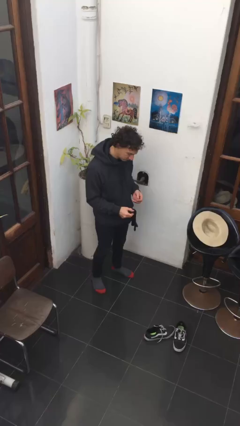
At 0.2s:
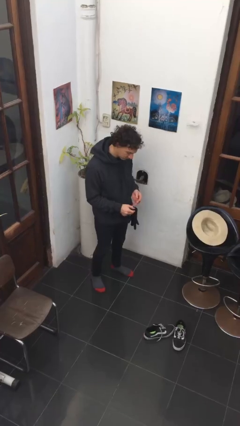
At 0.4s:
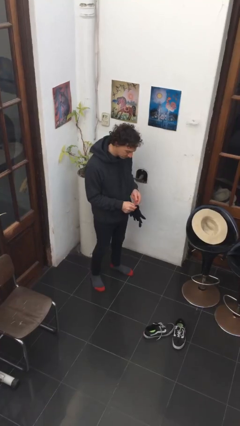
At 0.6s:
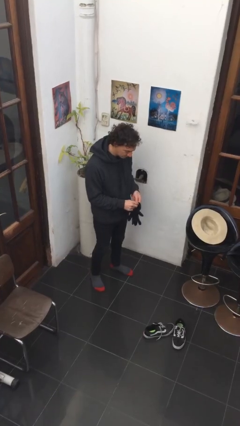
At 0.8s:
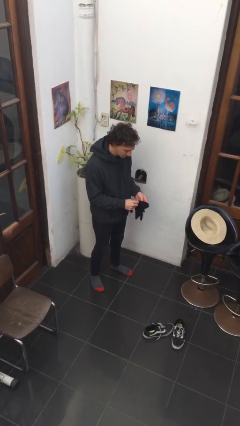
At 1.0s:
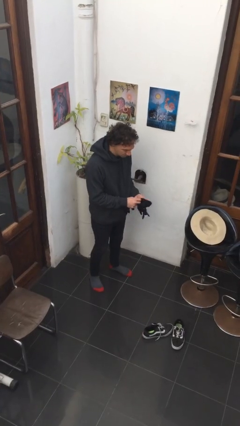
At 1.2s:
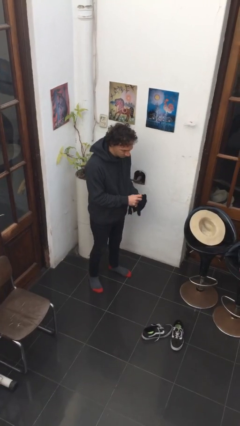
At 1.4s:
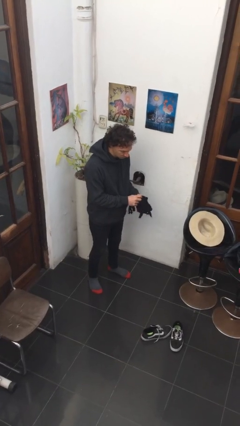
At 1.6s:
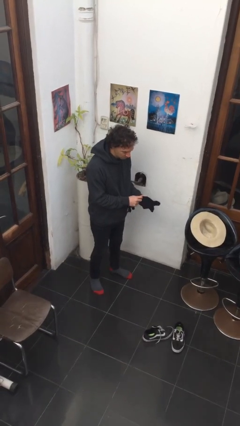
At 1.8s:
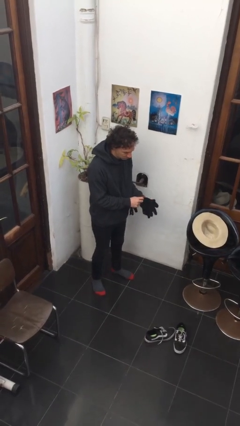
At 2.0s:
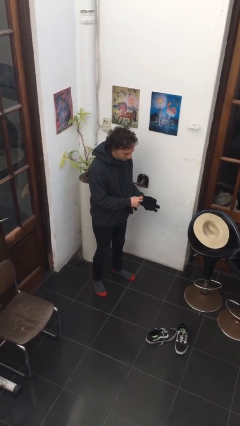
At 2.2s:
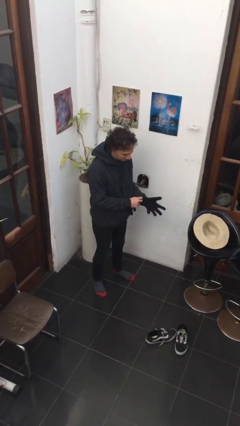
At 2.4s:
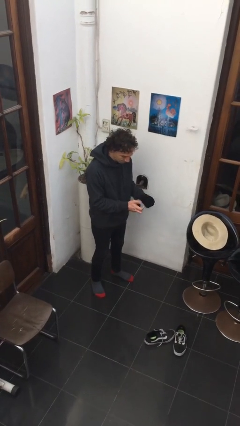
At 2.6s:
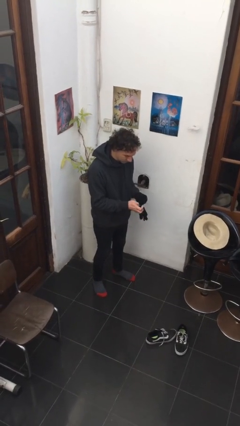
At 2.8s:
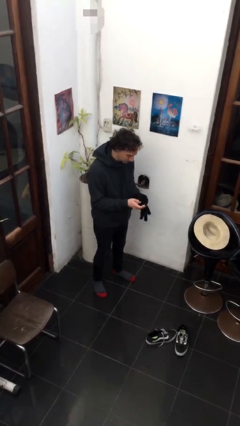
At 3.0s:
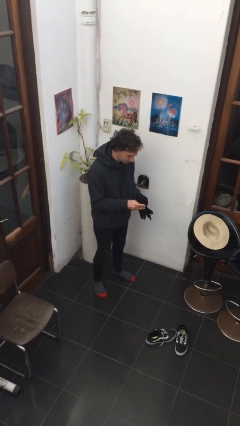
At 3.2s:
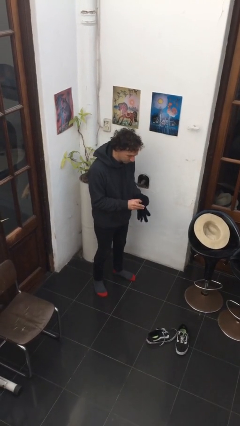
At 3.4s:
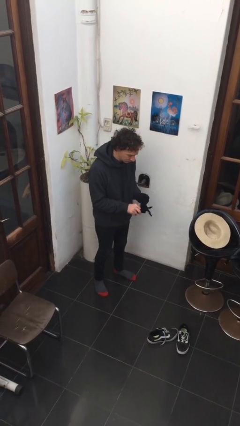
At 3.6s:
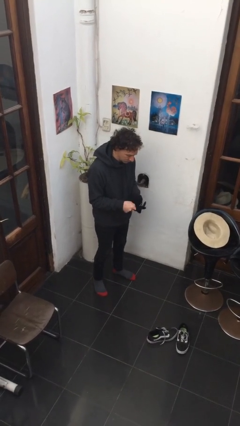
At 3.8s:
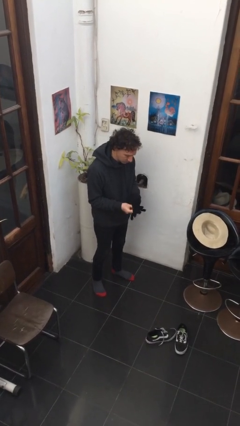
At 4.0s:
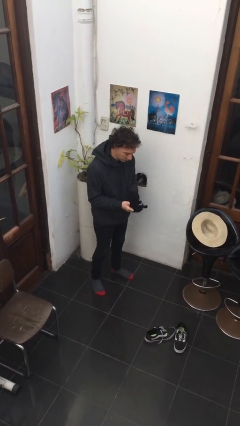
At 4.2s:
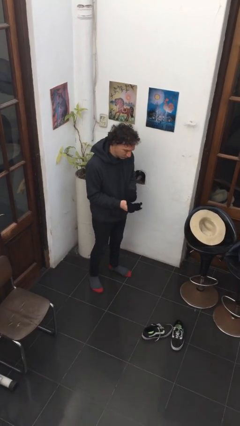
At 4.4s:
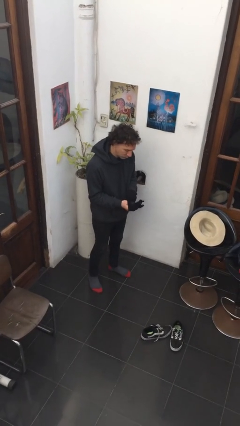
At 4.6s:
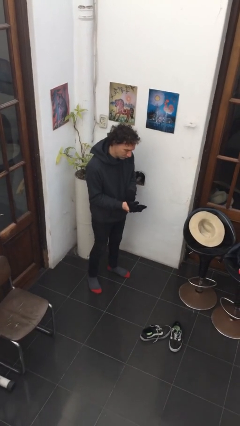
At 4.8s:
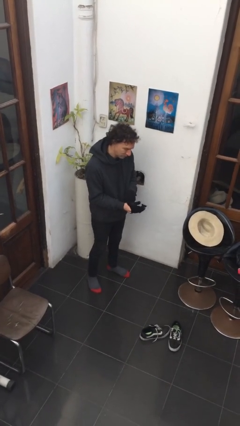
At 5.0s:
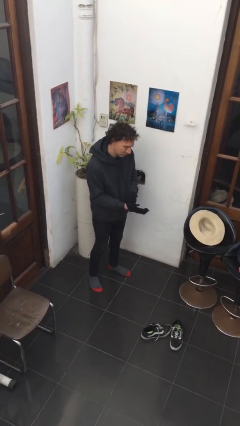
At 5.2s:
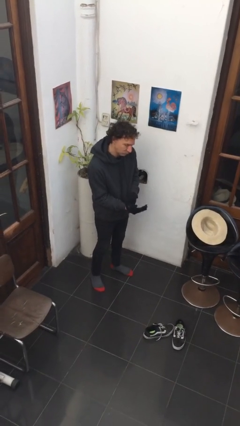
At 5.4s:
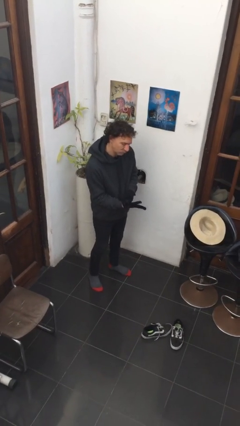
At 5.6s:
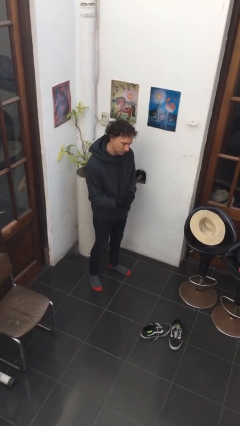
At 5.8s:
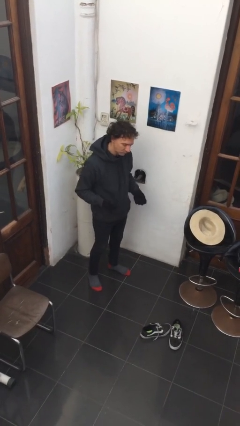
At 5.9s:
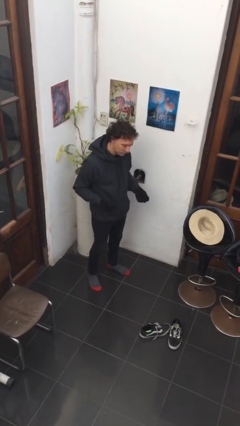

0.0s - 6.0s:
person puts on gloves

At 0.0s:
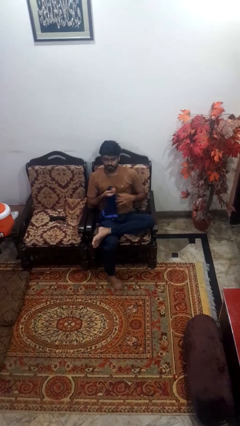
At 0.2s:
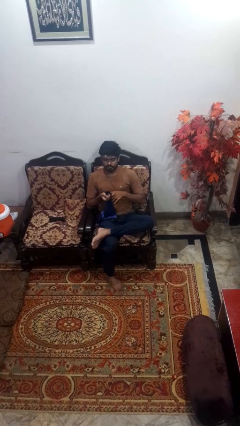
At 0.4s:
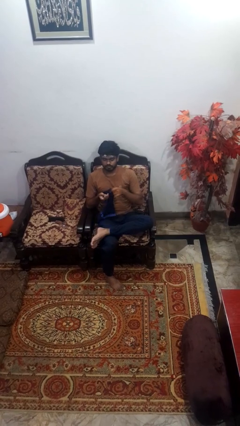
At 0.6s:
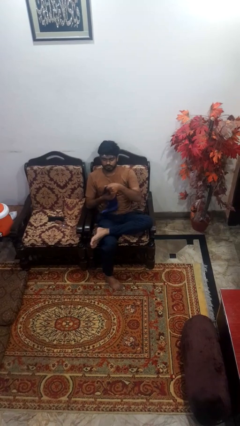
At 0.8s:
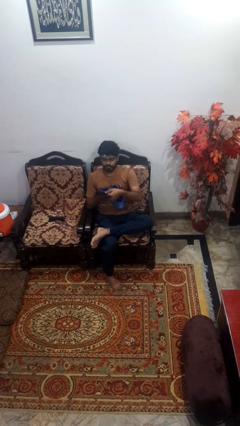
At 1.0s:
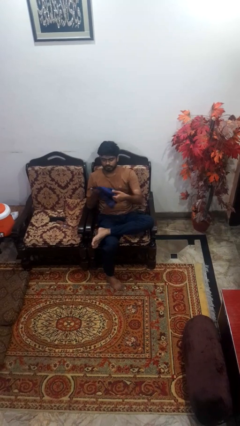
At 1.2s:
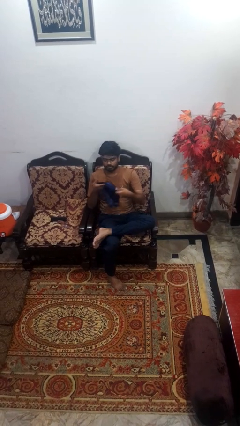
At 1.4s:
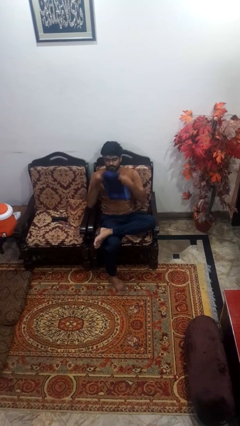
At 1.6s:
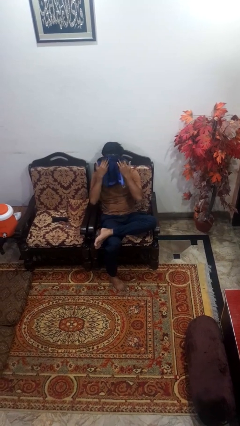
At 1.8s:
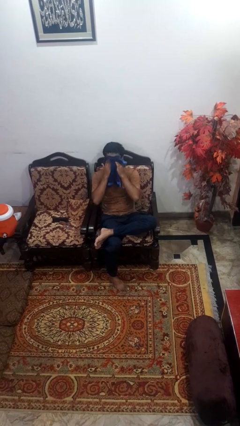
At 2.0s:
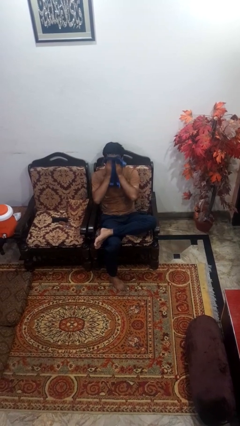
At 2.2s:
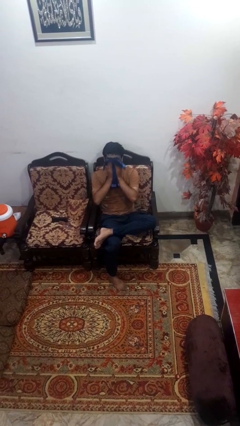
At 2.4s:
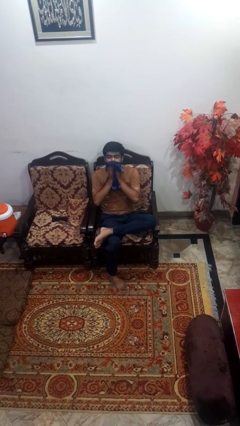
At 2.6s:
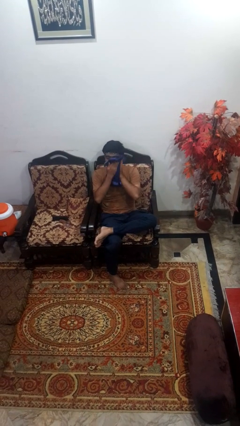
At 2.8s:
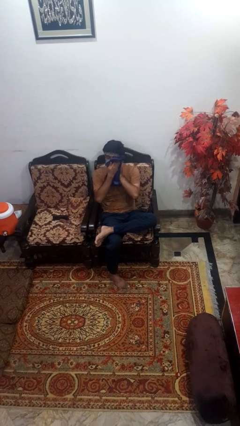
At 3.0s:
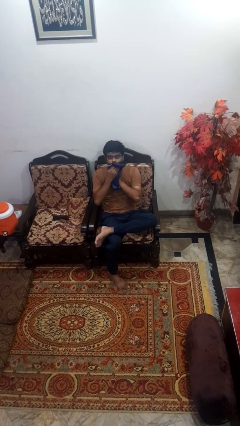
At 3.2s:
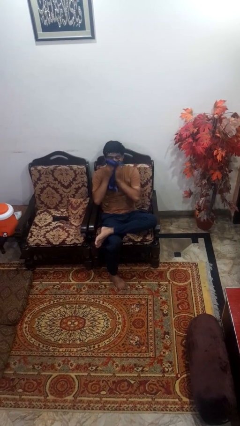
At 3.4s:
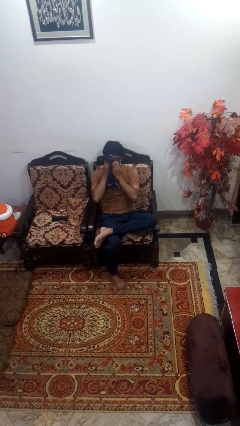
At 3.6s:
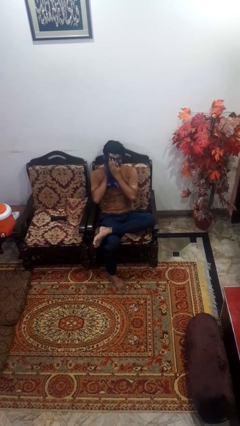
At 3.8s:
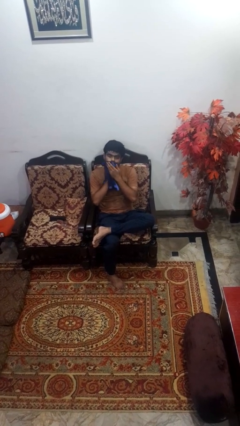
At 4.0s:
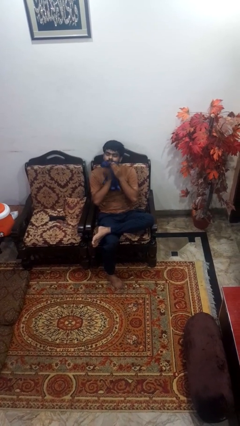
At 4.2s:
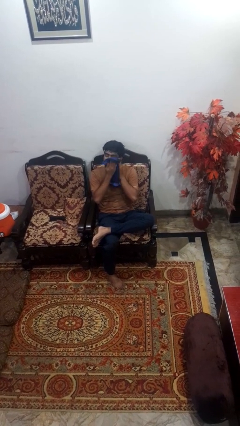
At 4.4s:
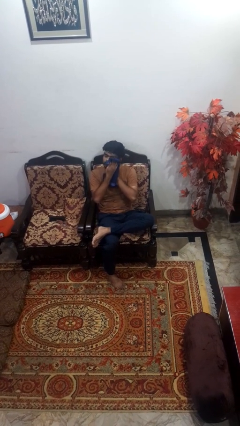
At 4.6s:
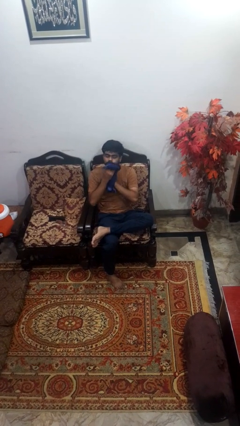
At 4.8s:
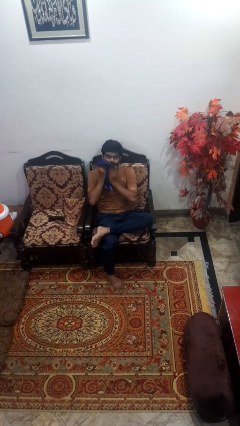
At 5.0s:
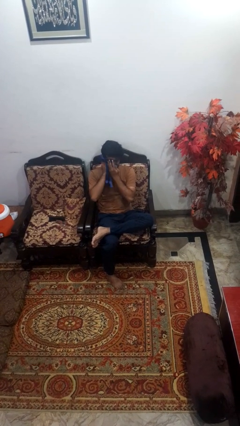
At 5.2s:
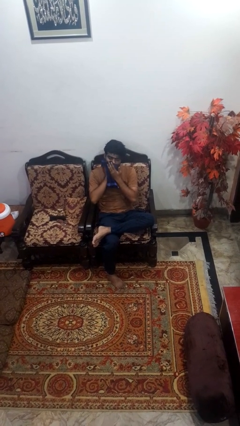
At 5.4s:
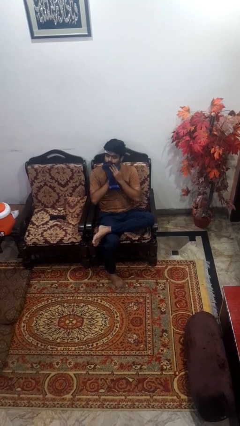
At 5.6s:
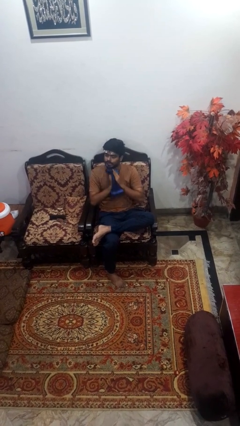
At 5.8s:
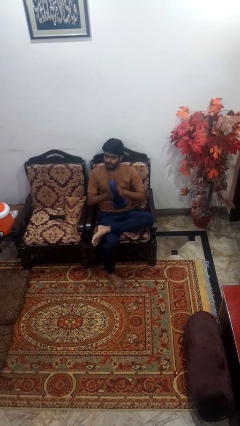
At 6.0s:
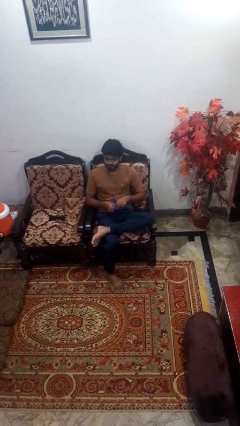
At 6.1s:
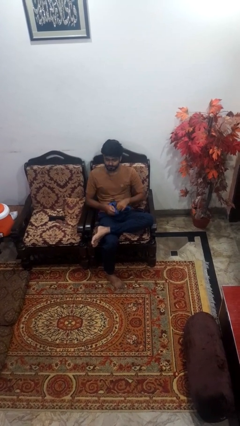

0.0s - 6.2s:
person wipes mouth with napkin

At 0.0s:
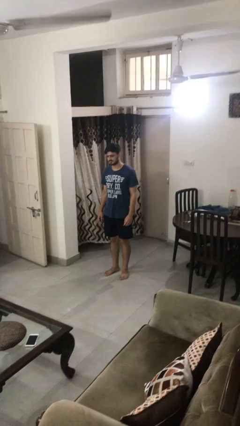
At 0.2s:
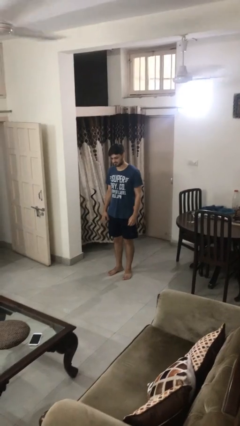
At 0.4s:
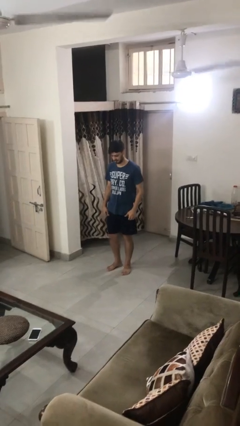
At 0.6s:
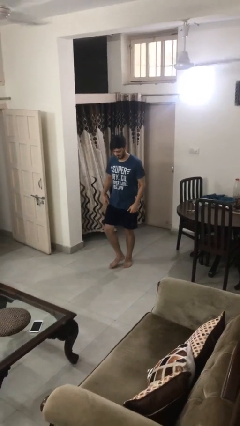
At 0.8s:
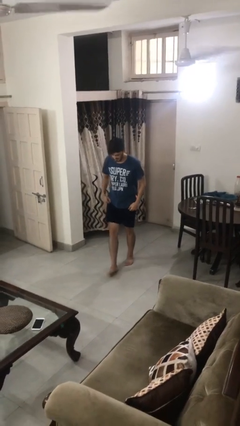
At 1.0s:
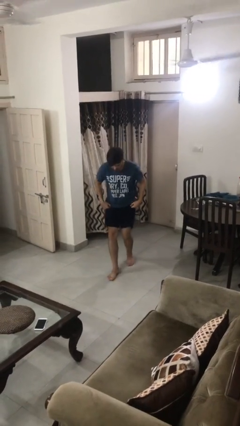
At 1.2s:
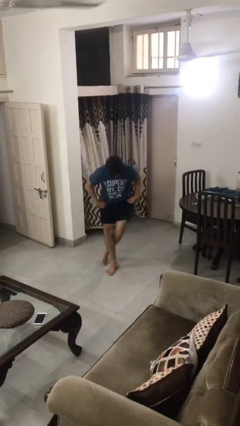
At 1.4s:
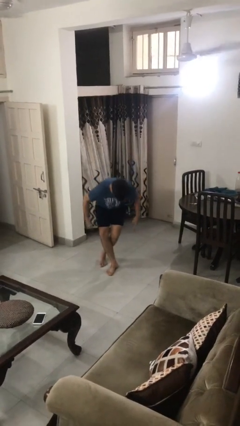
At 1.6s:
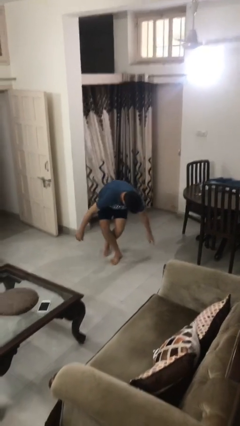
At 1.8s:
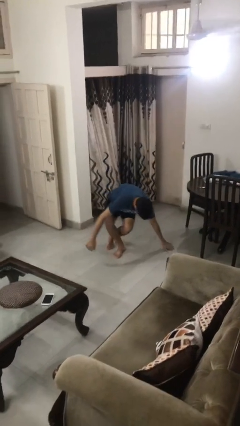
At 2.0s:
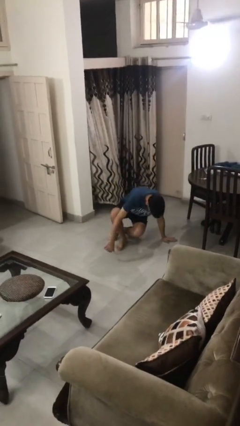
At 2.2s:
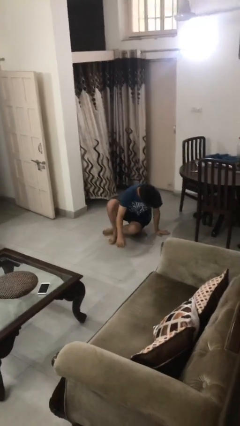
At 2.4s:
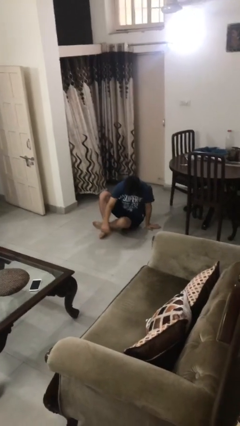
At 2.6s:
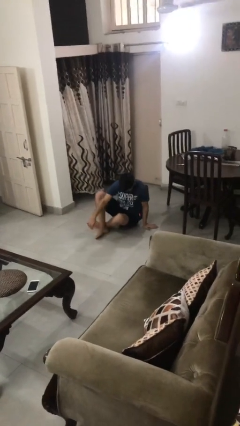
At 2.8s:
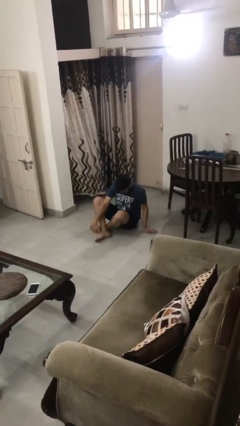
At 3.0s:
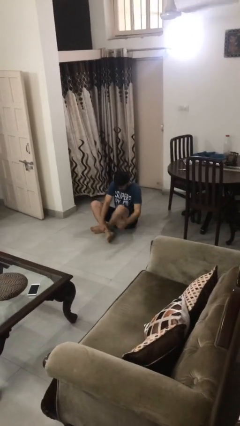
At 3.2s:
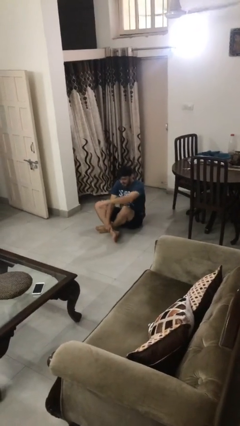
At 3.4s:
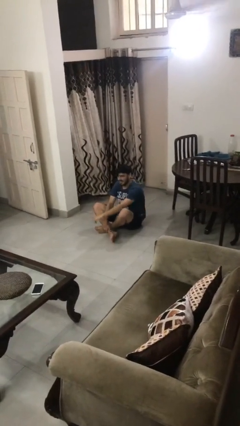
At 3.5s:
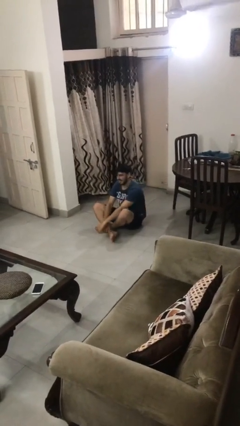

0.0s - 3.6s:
person sits crisscross

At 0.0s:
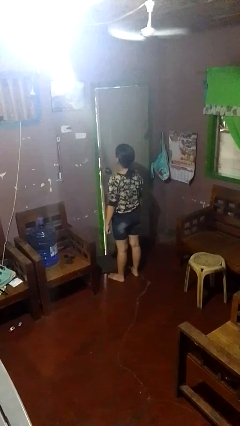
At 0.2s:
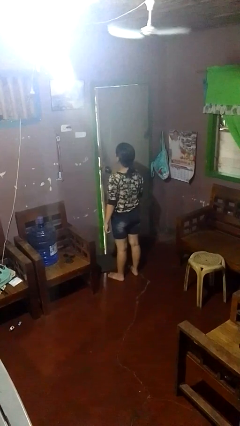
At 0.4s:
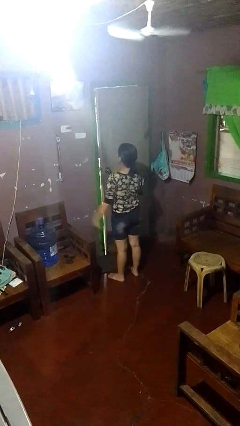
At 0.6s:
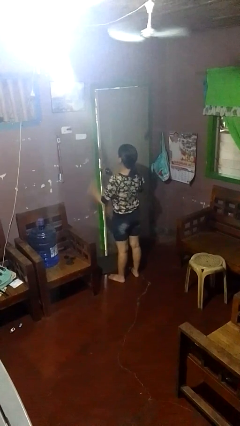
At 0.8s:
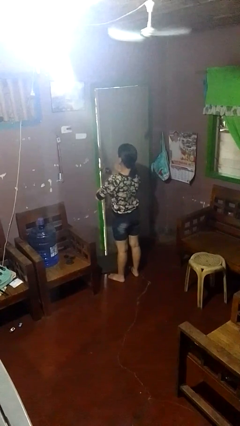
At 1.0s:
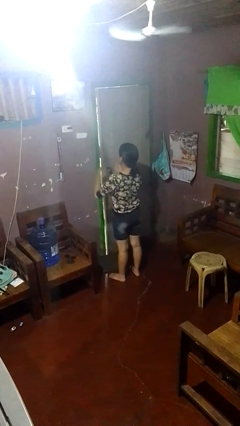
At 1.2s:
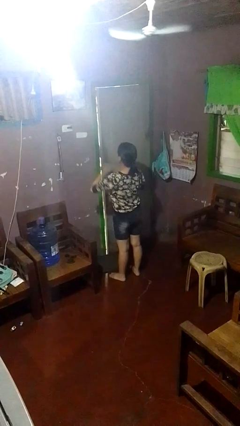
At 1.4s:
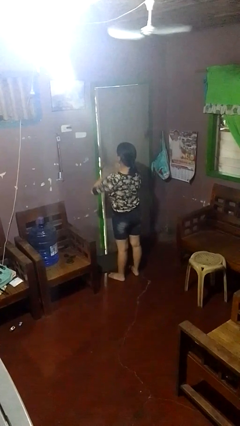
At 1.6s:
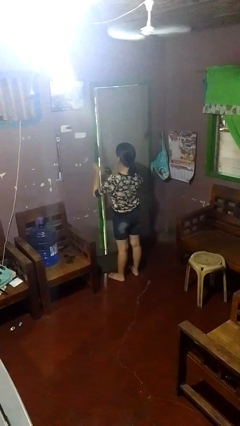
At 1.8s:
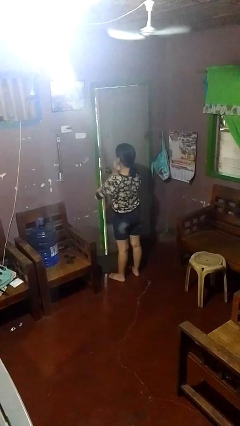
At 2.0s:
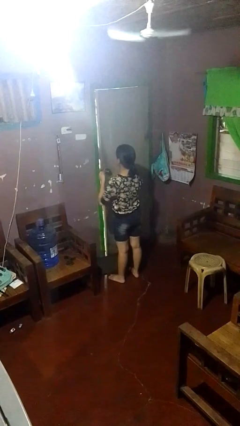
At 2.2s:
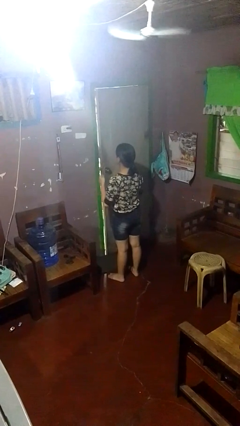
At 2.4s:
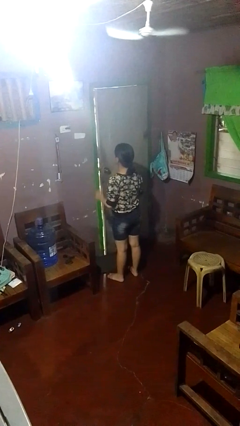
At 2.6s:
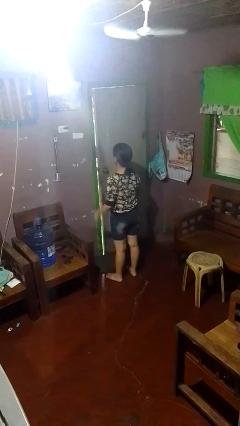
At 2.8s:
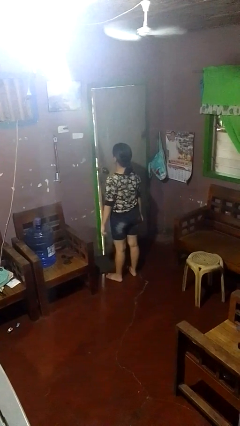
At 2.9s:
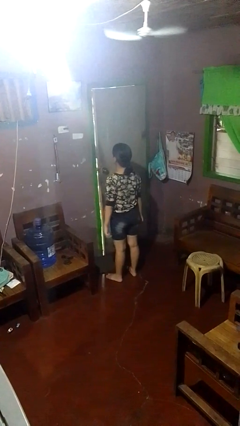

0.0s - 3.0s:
person drums on chest
